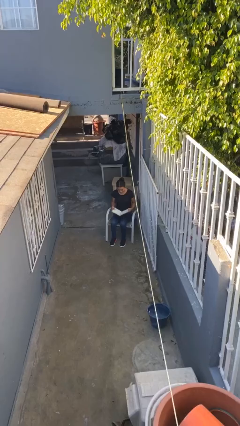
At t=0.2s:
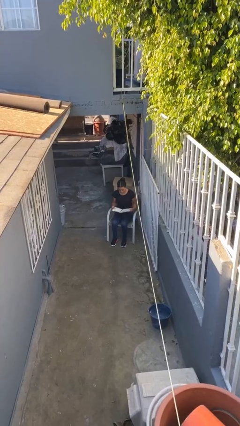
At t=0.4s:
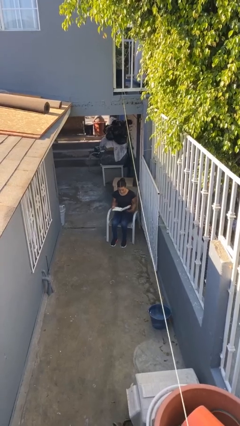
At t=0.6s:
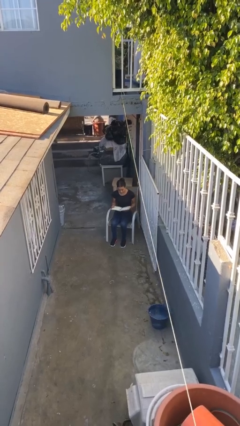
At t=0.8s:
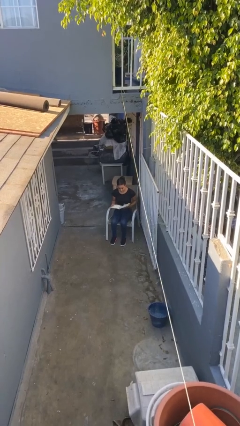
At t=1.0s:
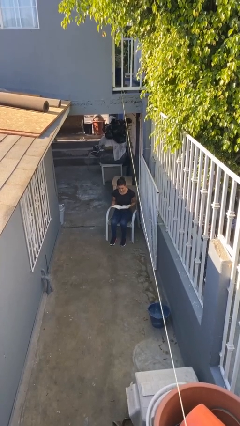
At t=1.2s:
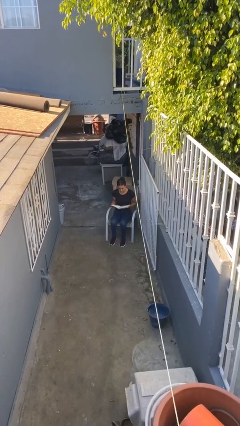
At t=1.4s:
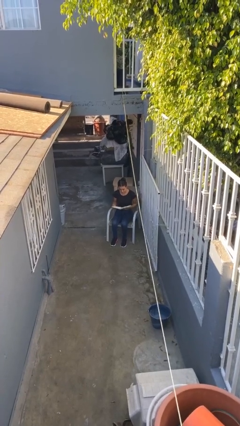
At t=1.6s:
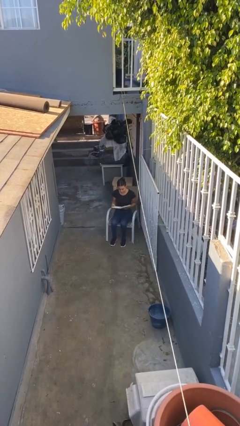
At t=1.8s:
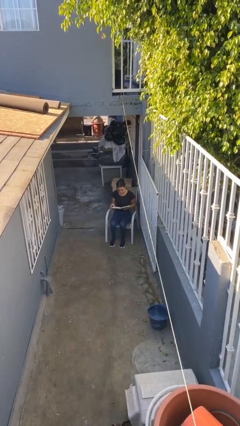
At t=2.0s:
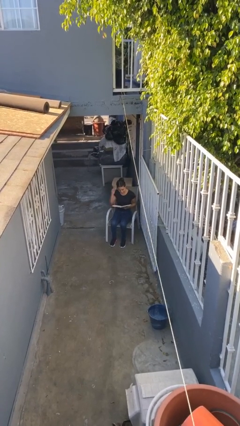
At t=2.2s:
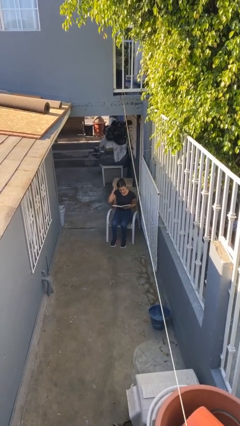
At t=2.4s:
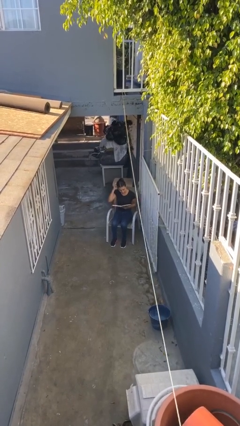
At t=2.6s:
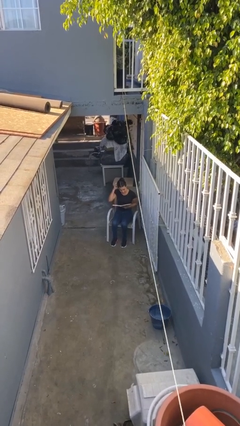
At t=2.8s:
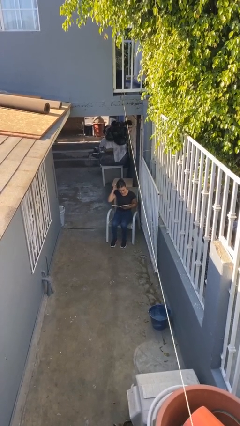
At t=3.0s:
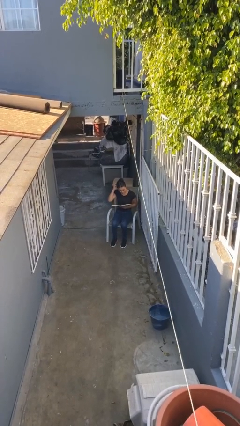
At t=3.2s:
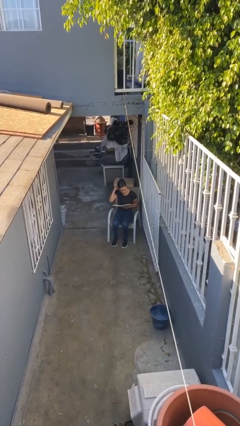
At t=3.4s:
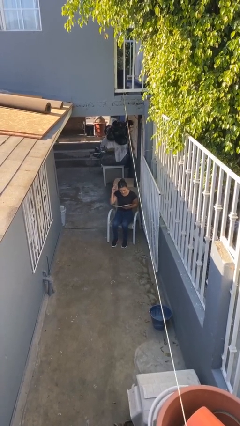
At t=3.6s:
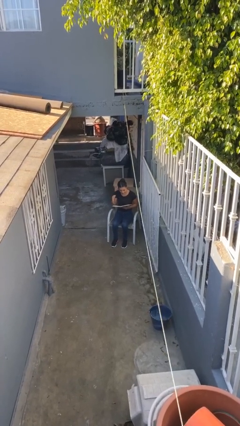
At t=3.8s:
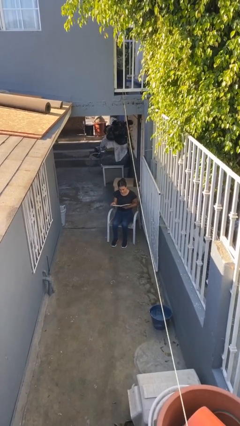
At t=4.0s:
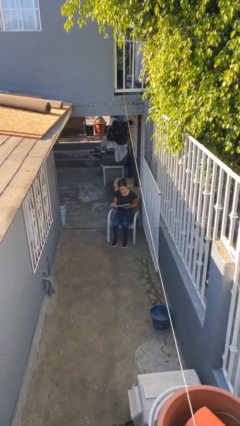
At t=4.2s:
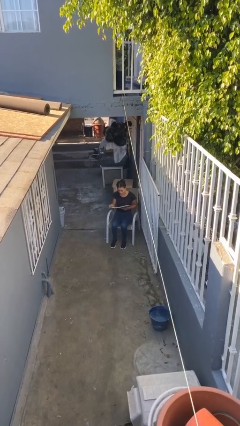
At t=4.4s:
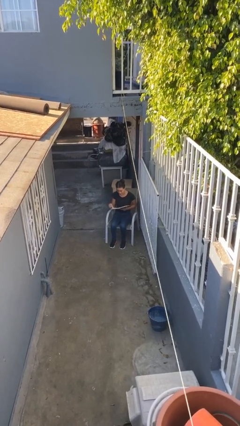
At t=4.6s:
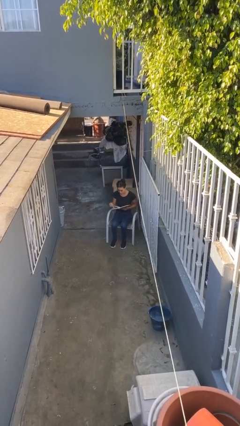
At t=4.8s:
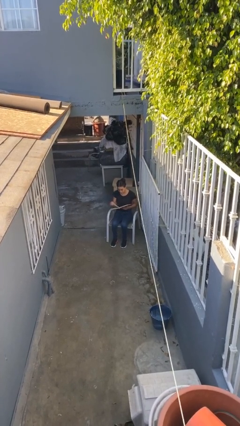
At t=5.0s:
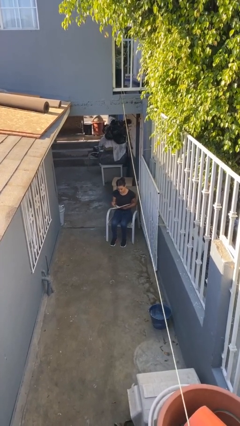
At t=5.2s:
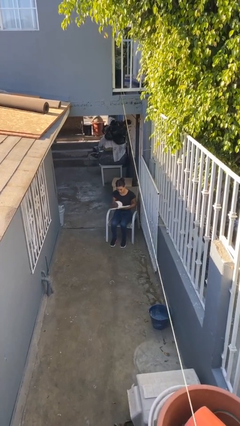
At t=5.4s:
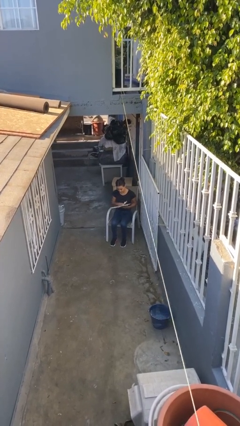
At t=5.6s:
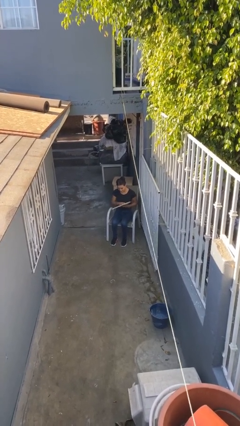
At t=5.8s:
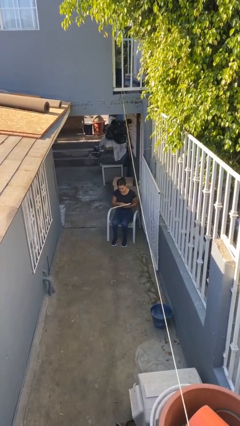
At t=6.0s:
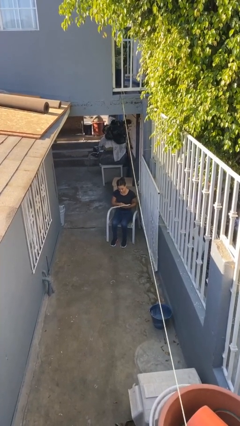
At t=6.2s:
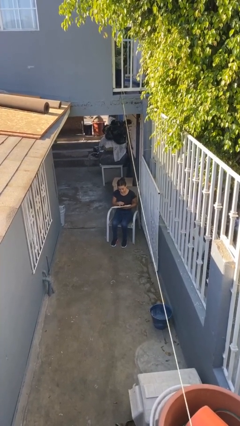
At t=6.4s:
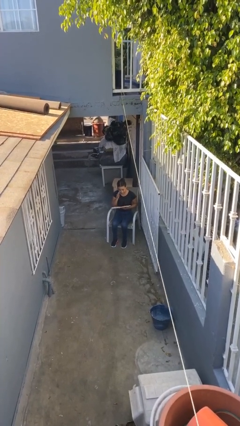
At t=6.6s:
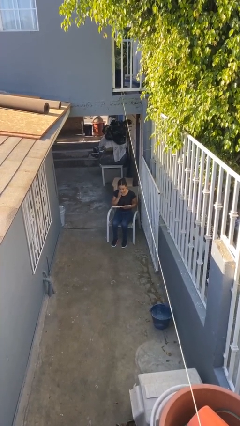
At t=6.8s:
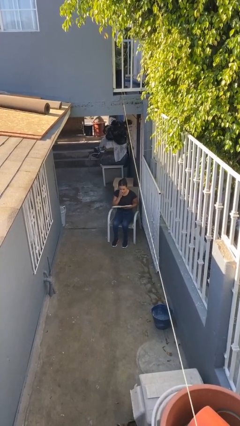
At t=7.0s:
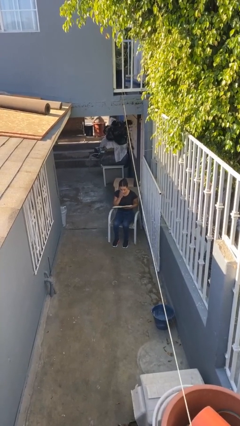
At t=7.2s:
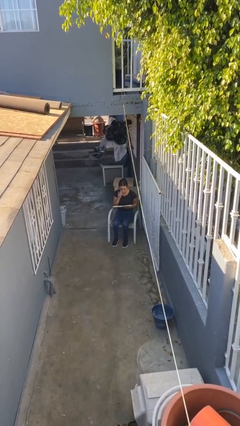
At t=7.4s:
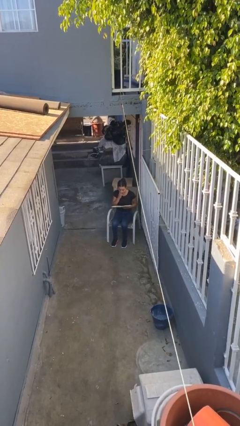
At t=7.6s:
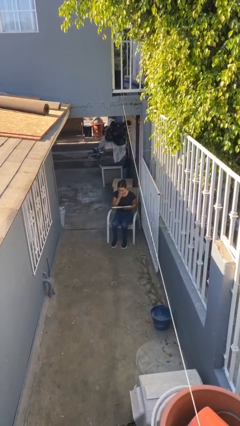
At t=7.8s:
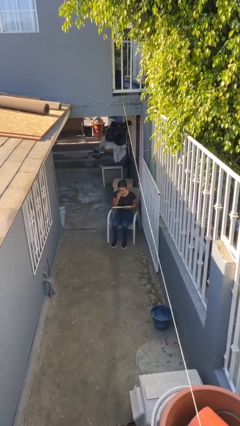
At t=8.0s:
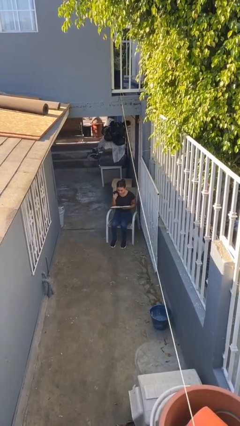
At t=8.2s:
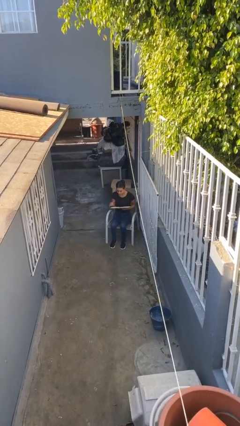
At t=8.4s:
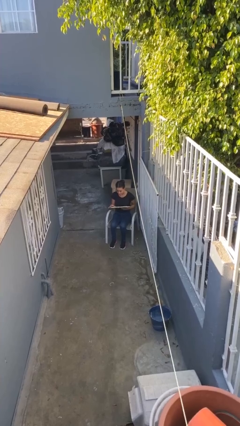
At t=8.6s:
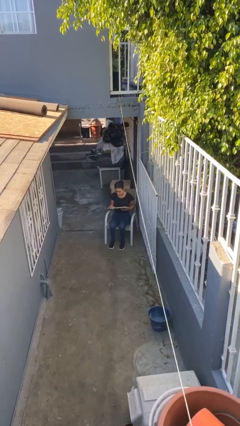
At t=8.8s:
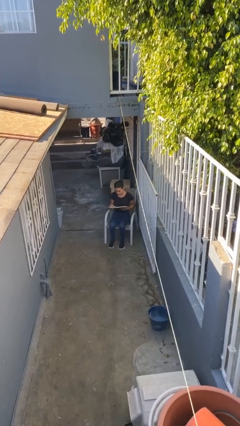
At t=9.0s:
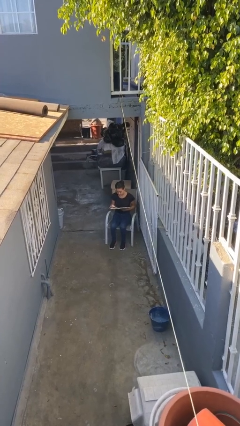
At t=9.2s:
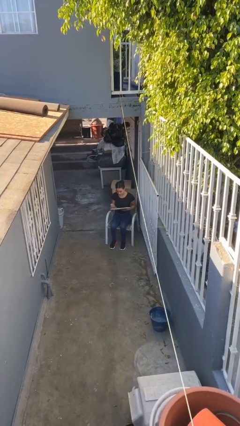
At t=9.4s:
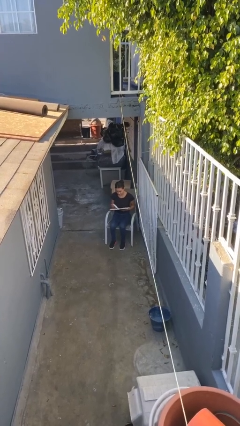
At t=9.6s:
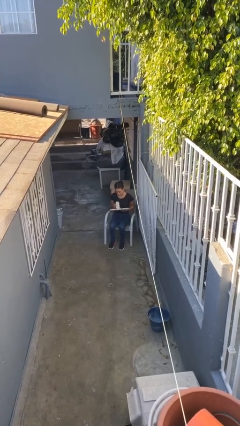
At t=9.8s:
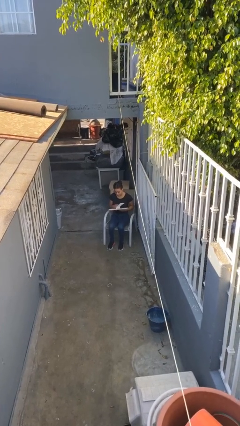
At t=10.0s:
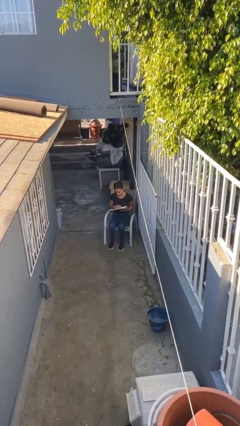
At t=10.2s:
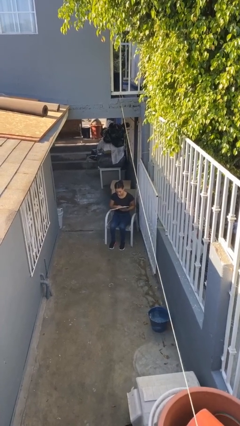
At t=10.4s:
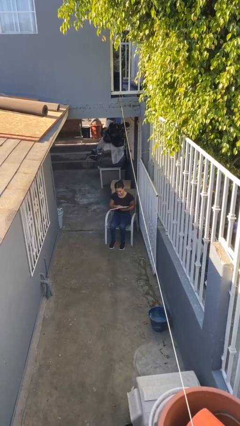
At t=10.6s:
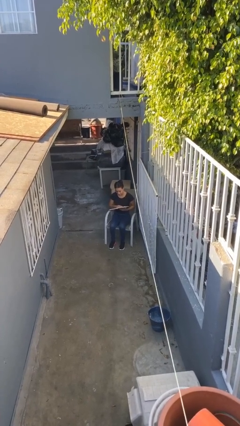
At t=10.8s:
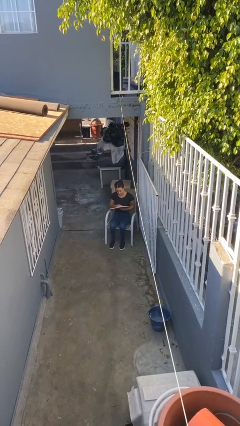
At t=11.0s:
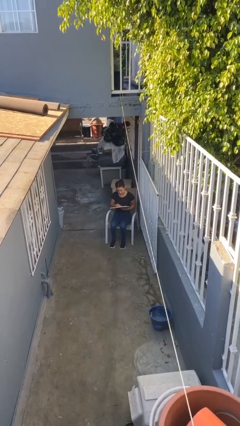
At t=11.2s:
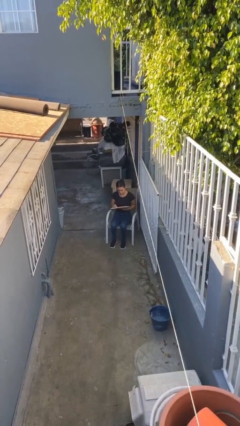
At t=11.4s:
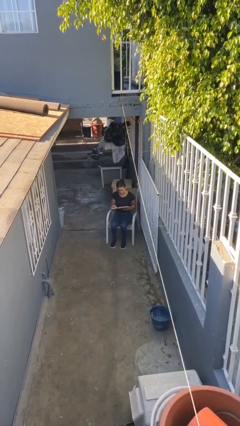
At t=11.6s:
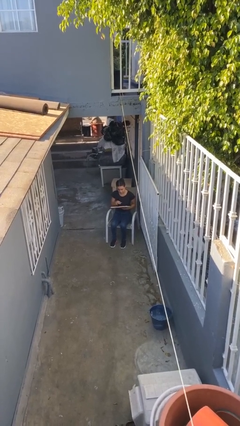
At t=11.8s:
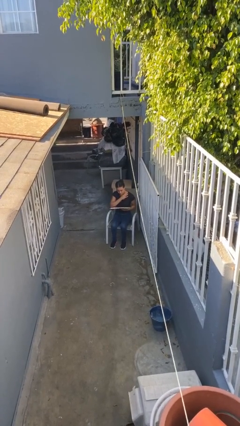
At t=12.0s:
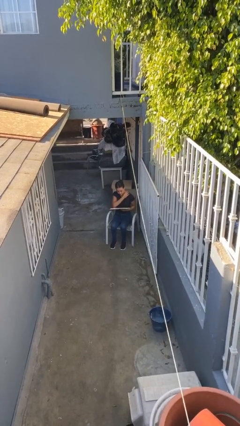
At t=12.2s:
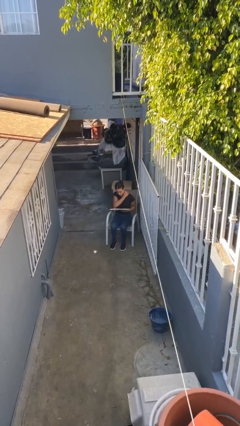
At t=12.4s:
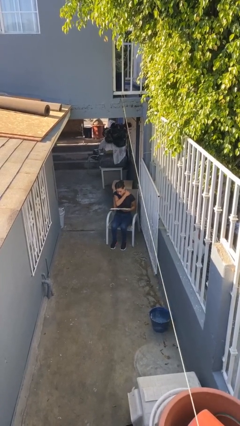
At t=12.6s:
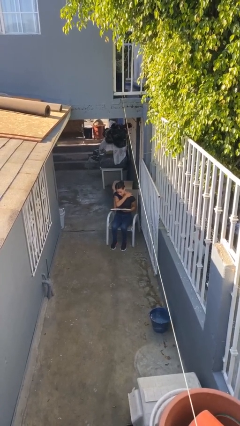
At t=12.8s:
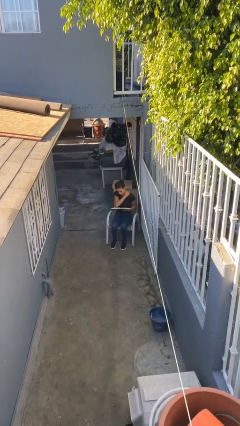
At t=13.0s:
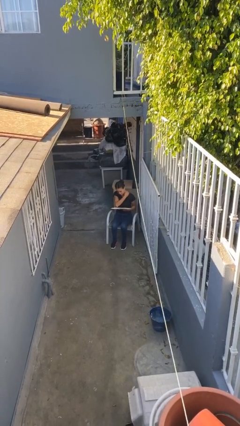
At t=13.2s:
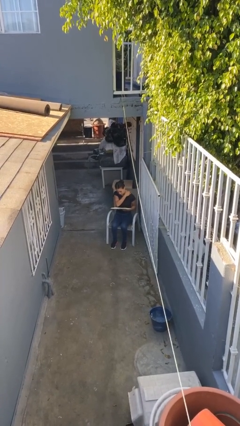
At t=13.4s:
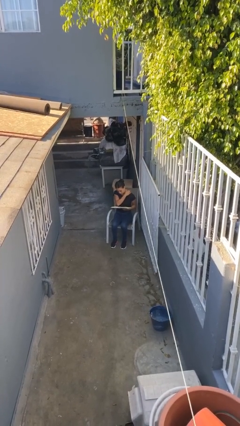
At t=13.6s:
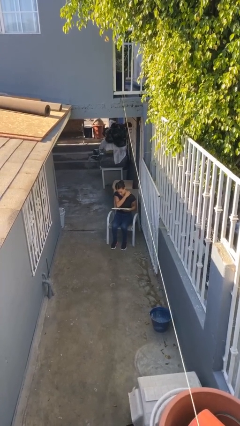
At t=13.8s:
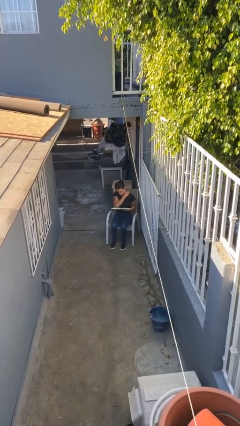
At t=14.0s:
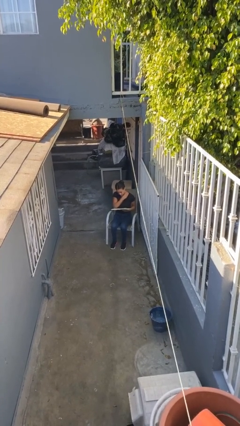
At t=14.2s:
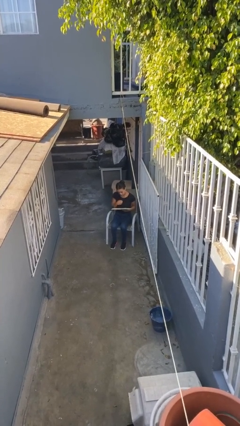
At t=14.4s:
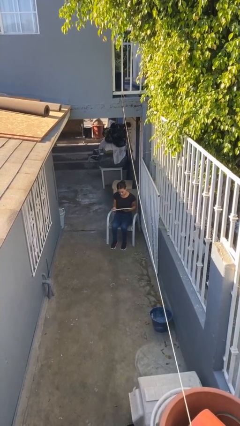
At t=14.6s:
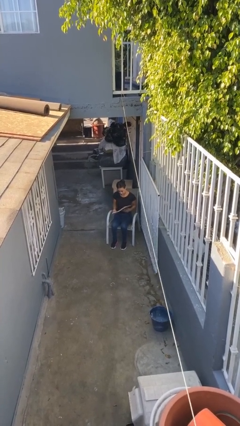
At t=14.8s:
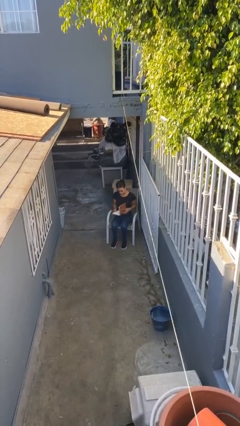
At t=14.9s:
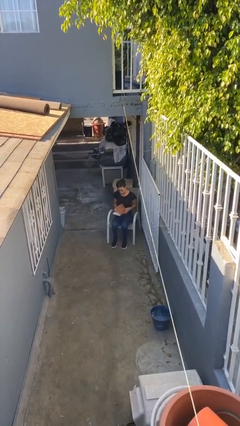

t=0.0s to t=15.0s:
person reads document

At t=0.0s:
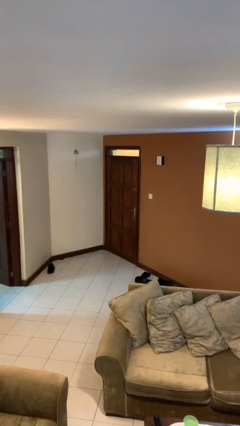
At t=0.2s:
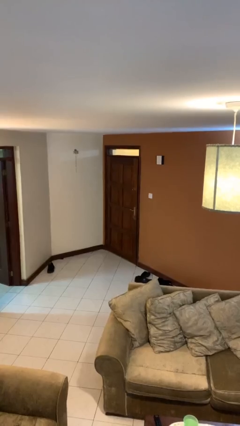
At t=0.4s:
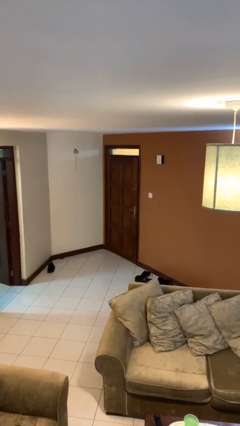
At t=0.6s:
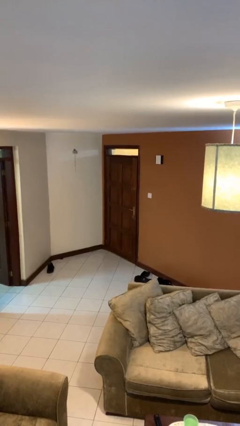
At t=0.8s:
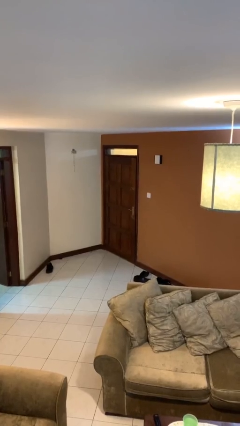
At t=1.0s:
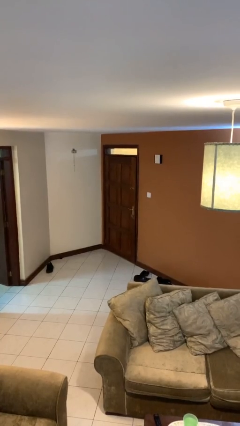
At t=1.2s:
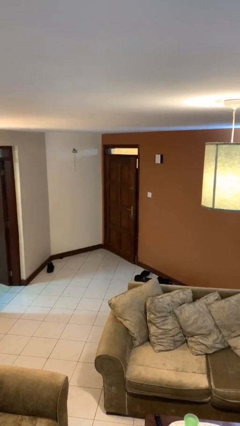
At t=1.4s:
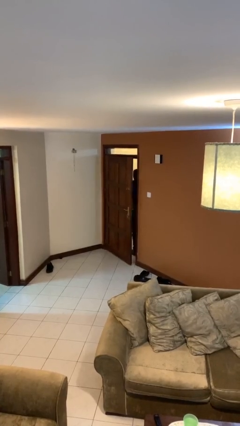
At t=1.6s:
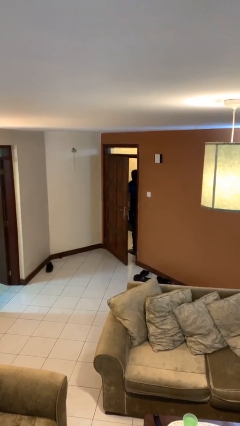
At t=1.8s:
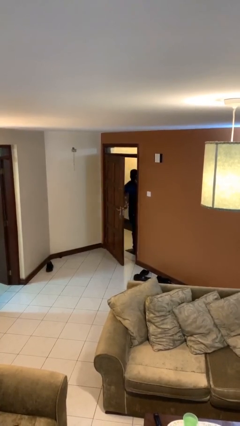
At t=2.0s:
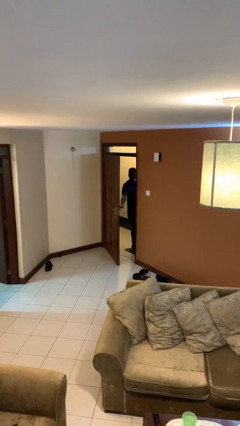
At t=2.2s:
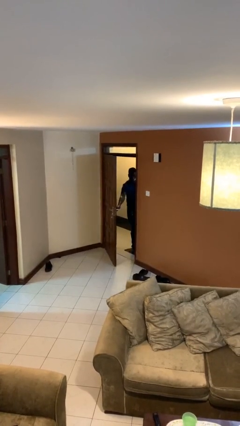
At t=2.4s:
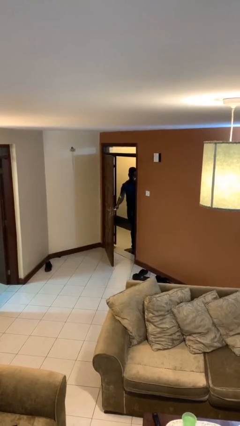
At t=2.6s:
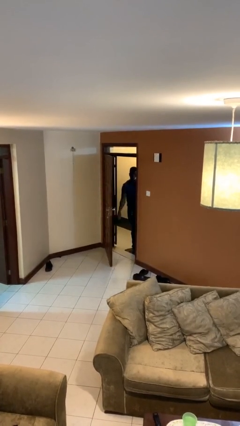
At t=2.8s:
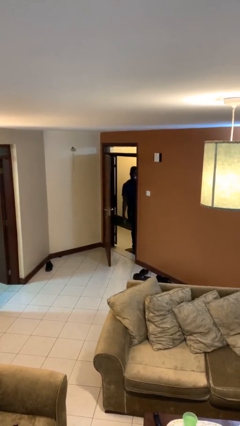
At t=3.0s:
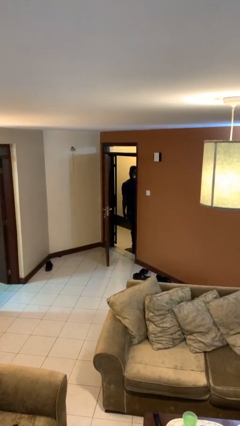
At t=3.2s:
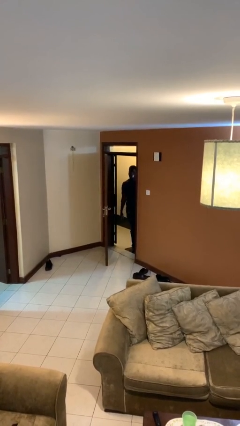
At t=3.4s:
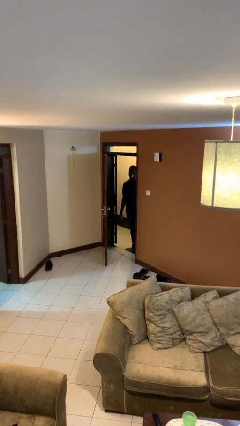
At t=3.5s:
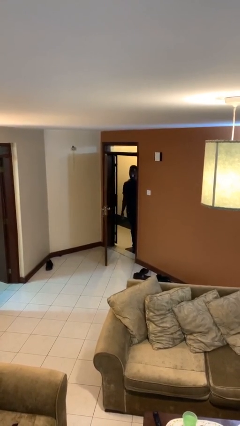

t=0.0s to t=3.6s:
person opens facility door
